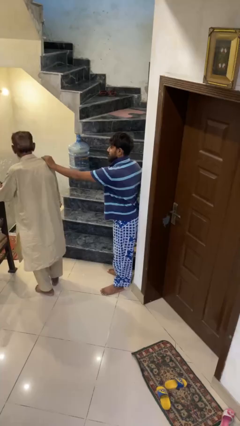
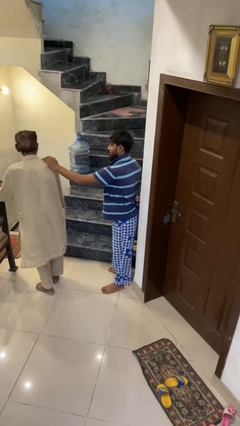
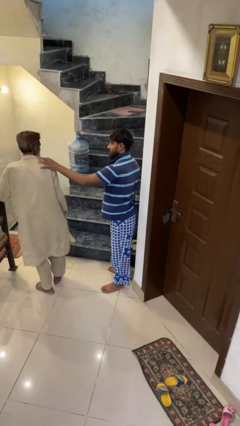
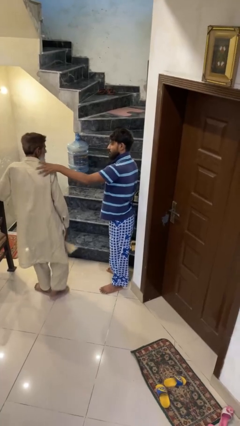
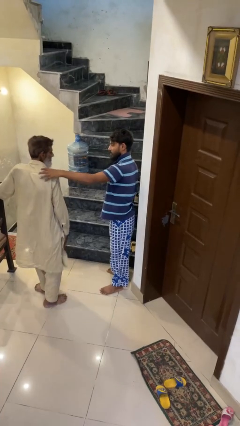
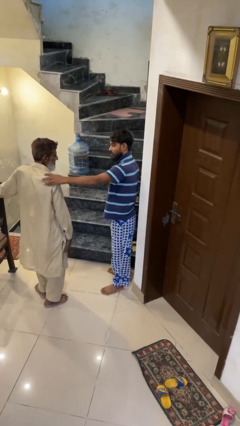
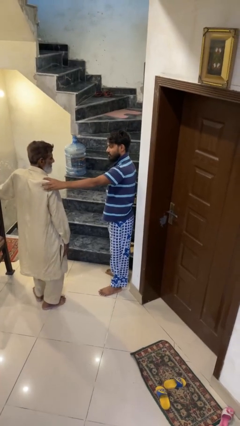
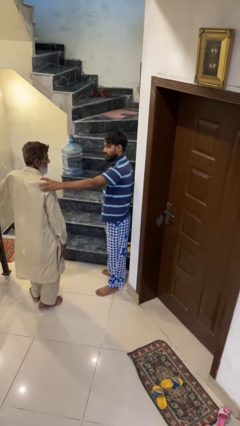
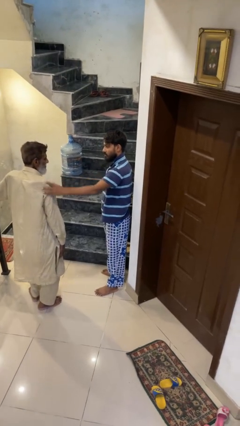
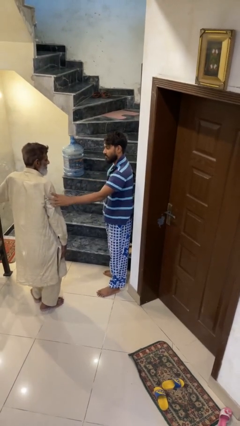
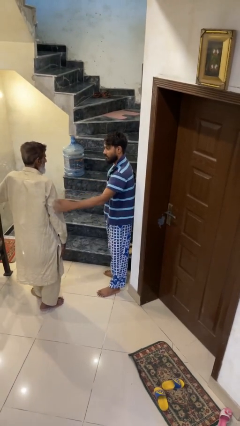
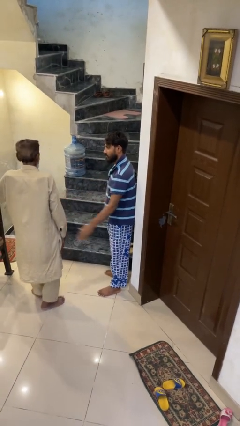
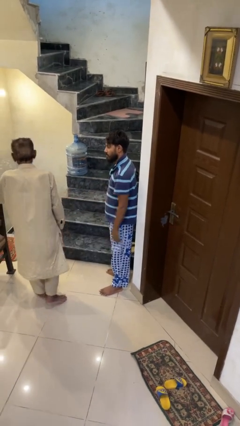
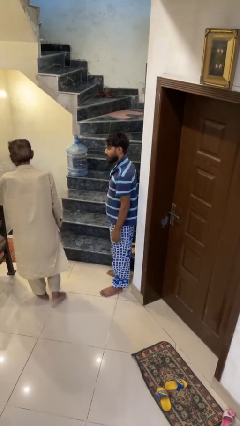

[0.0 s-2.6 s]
person spins person around

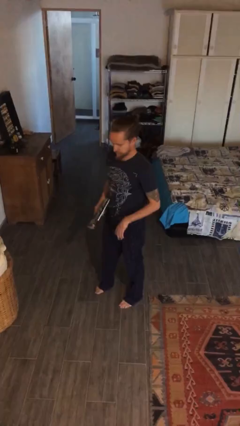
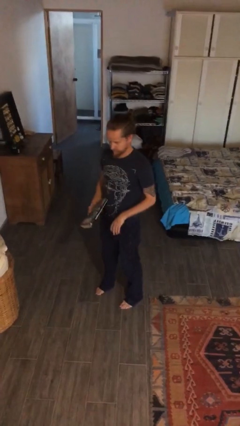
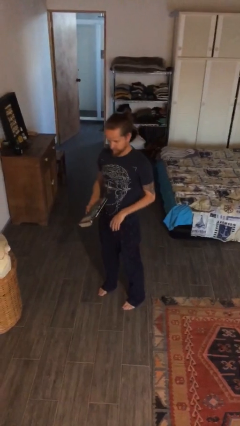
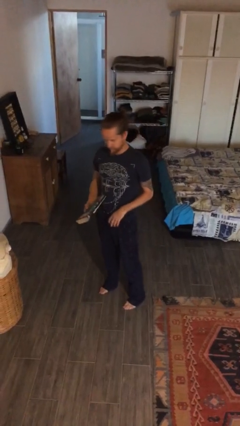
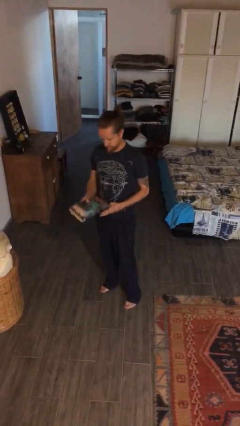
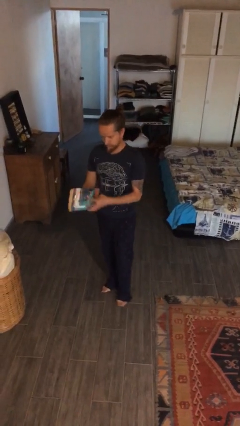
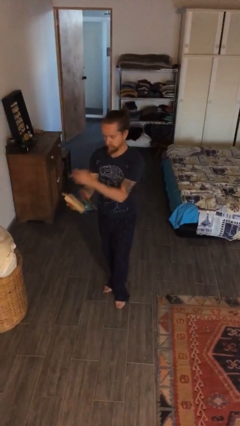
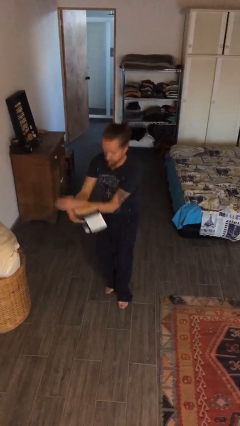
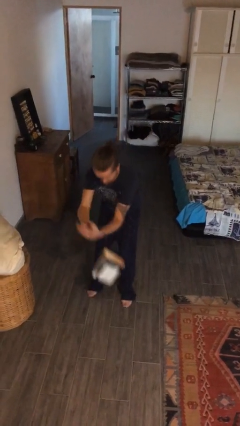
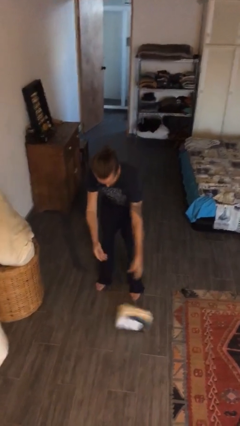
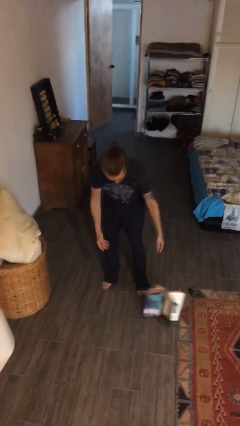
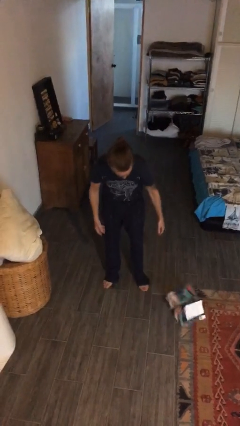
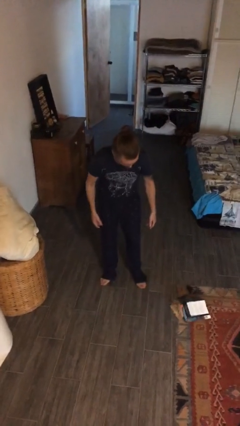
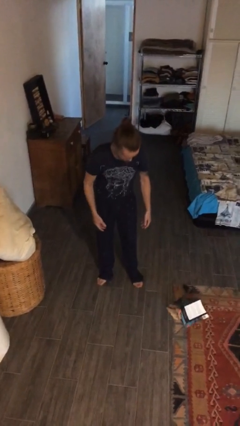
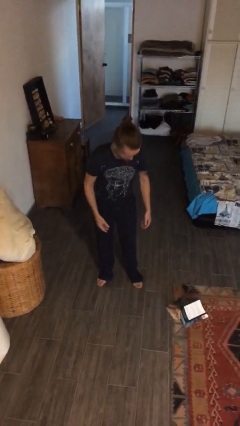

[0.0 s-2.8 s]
person drops object

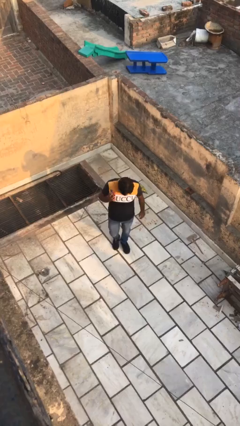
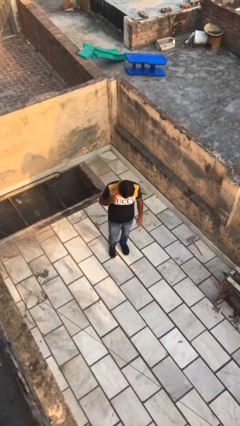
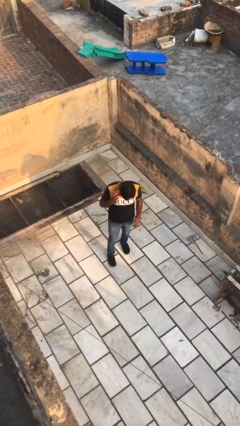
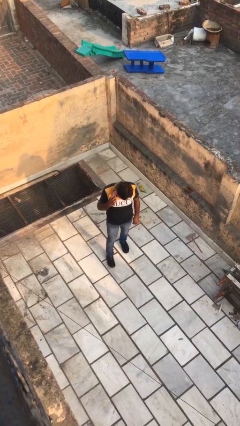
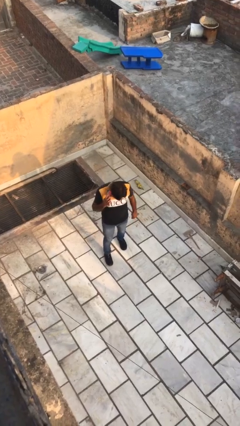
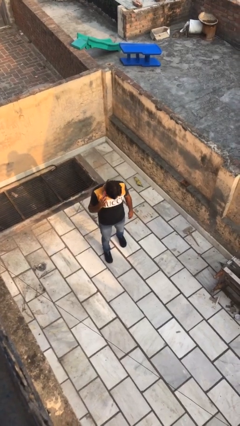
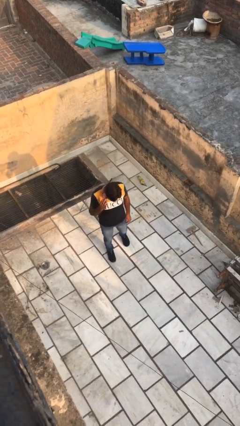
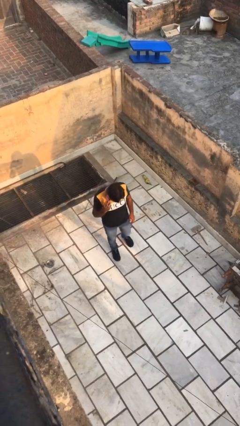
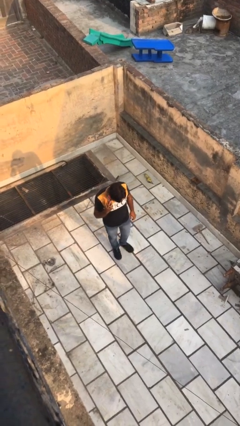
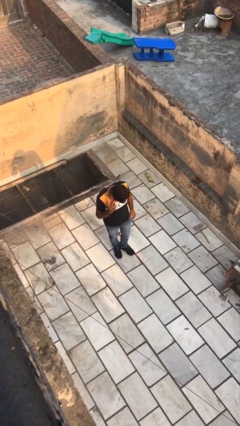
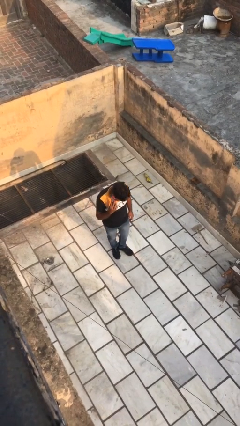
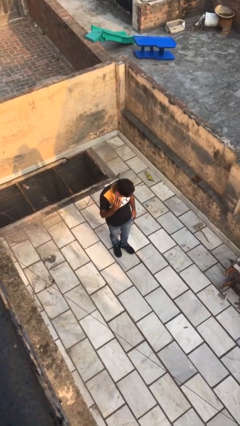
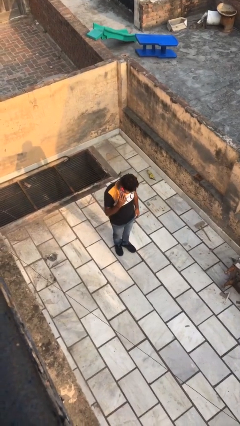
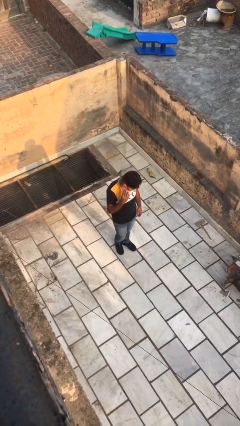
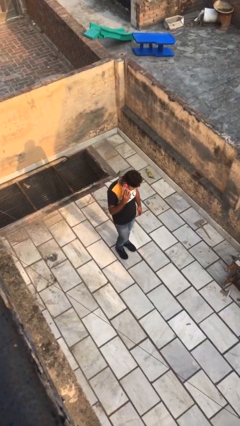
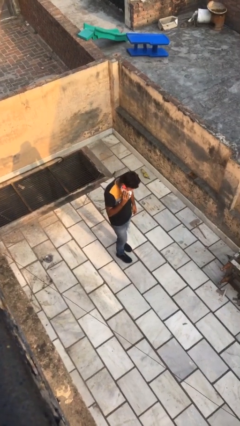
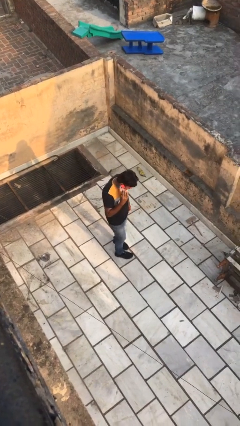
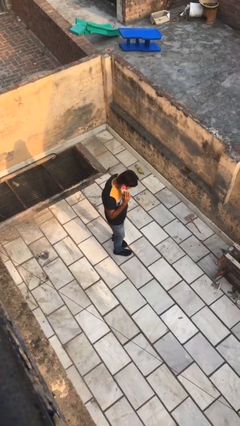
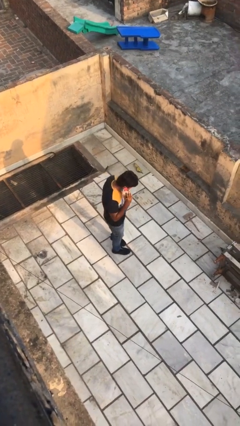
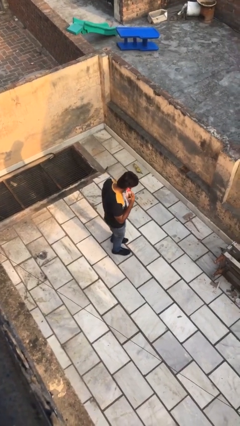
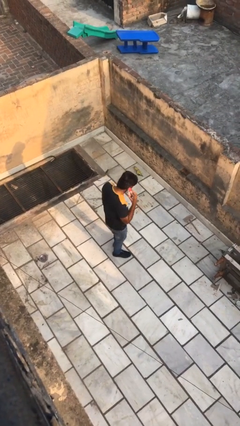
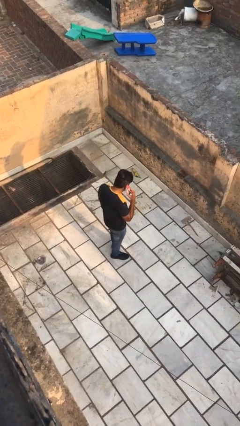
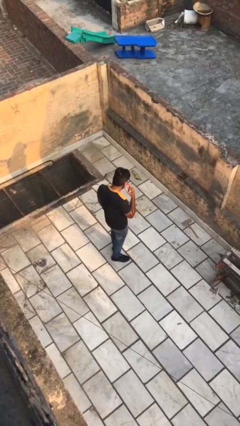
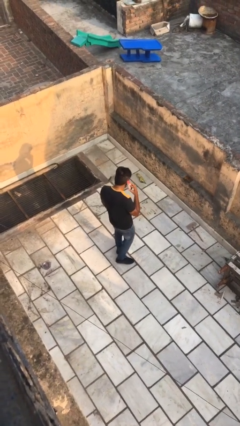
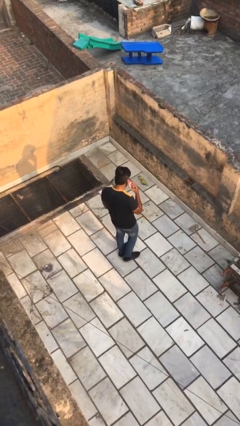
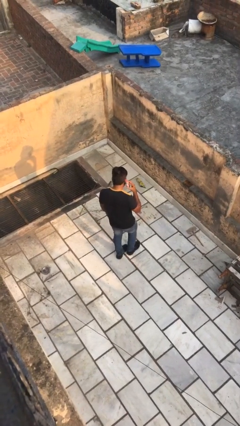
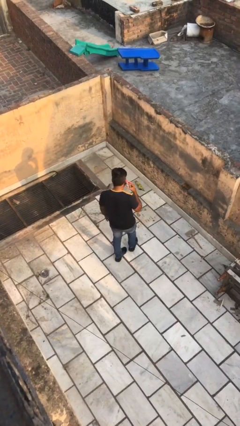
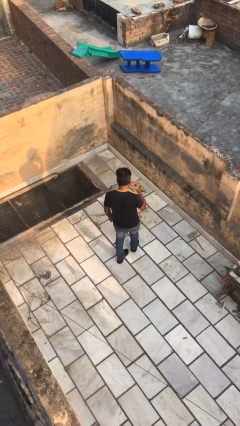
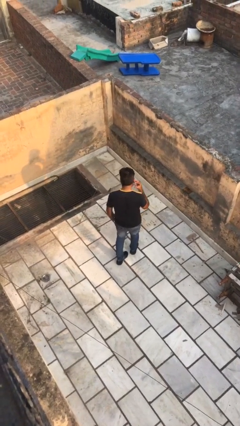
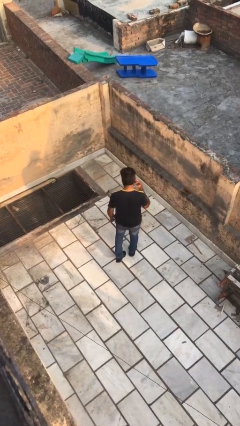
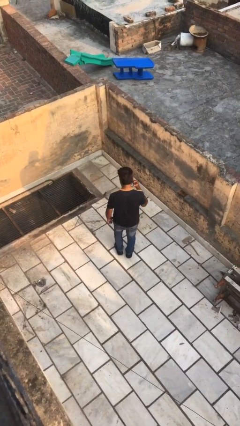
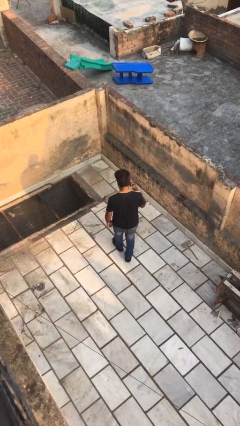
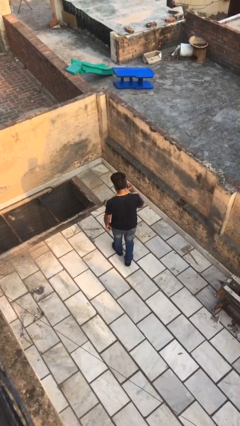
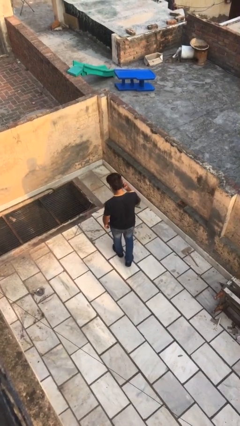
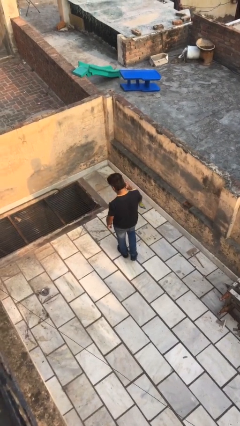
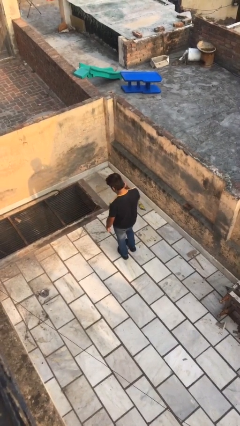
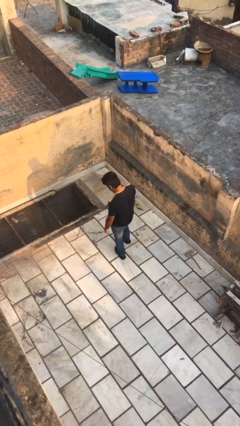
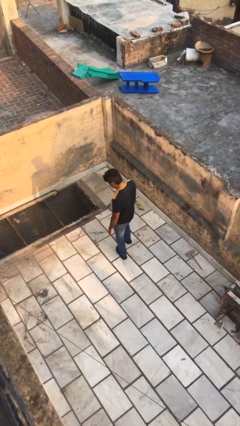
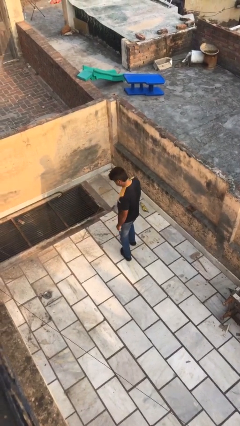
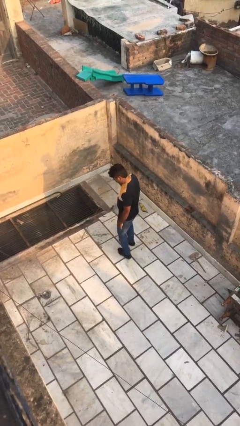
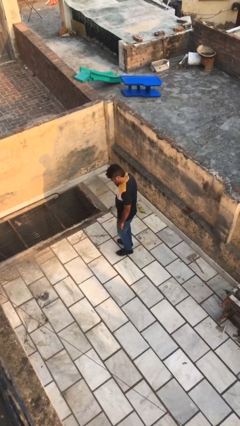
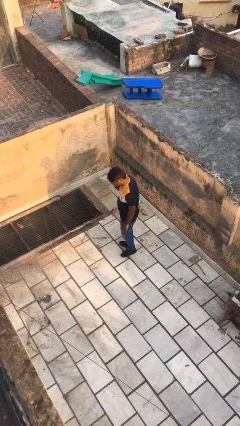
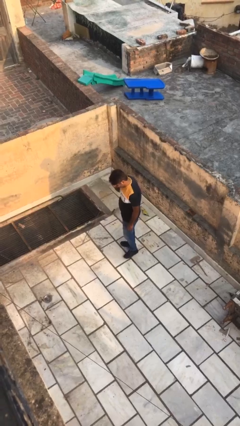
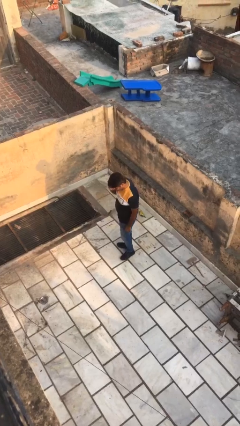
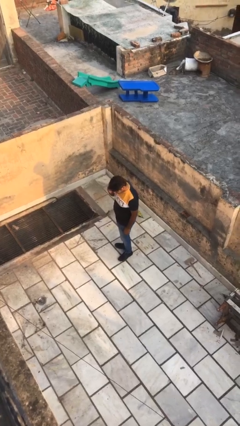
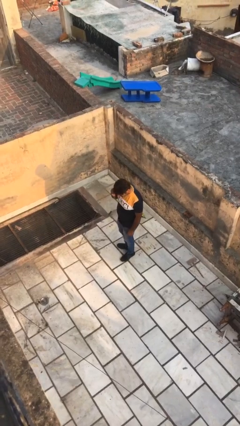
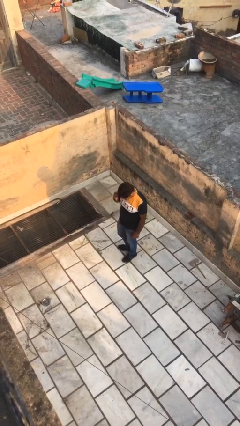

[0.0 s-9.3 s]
person talks on phone

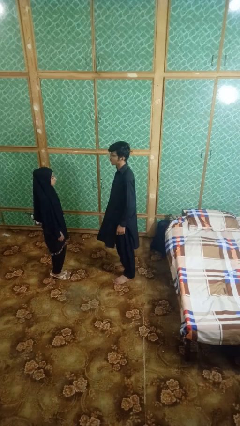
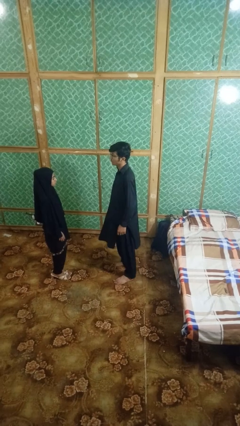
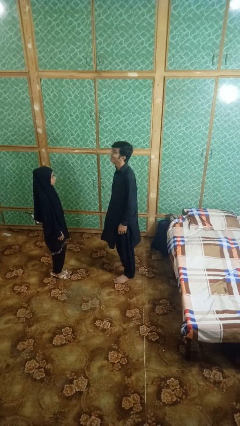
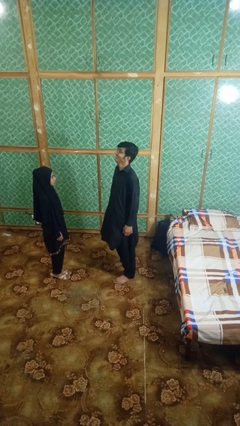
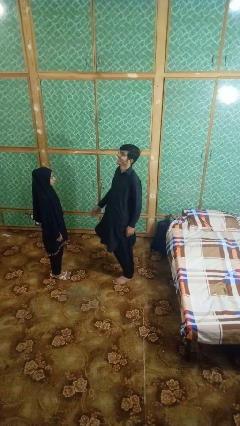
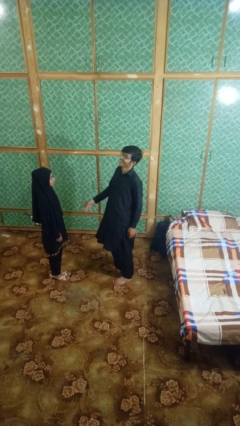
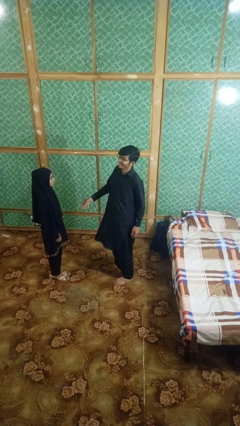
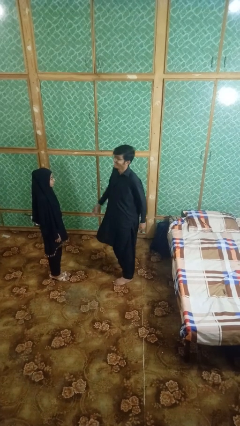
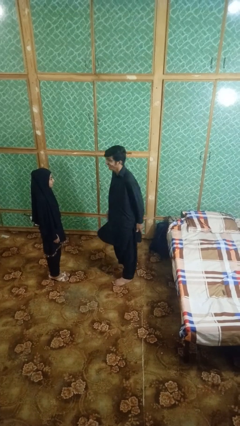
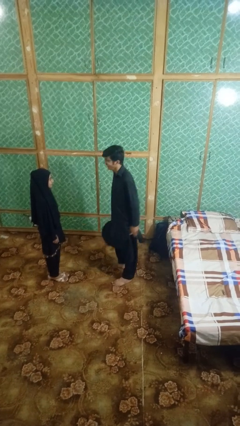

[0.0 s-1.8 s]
person laughs with person

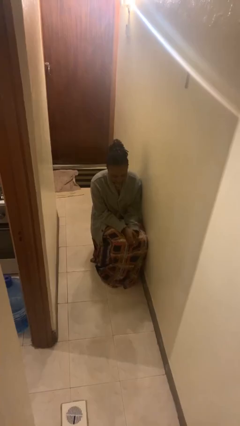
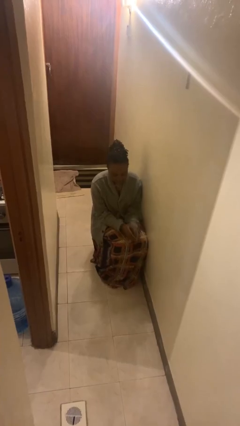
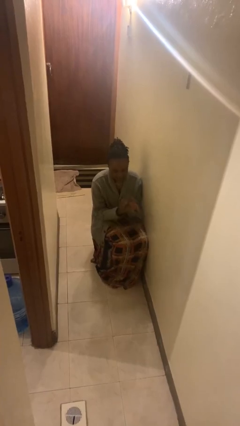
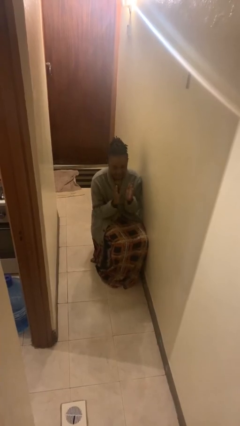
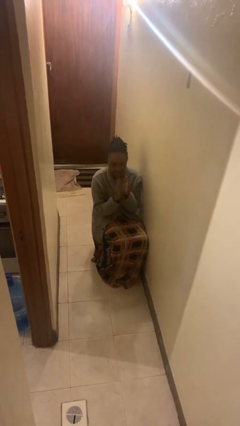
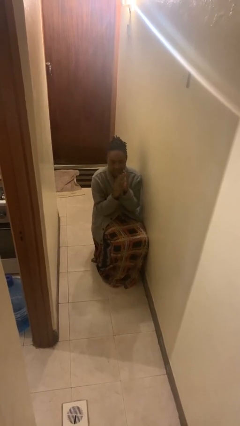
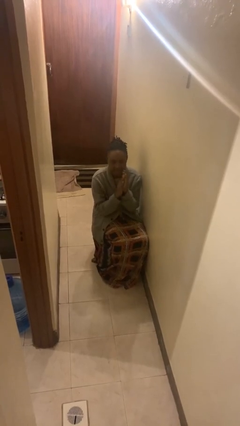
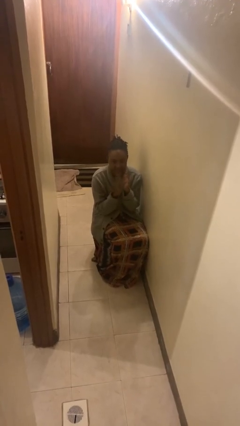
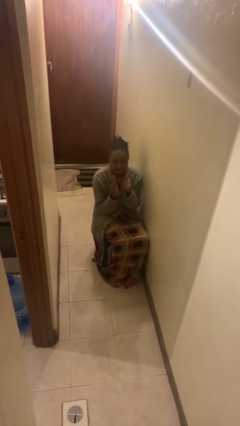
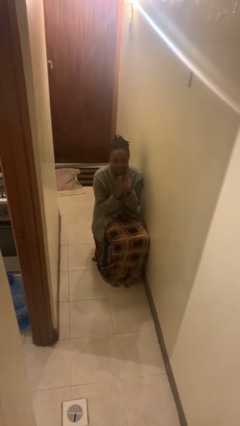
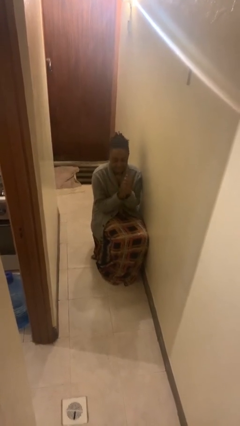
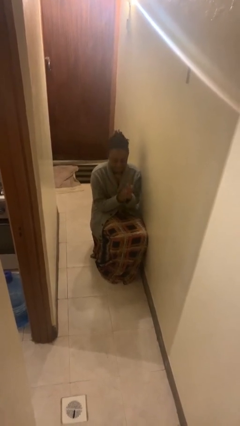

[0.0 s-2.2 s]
person claps hands
